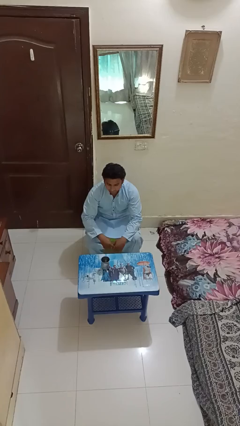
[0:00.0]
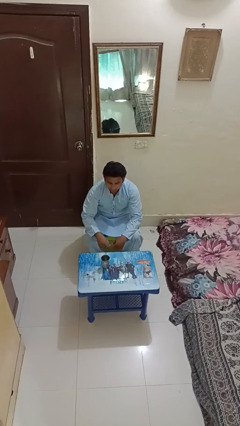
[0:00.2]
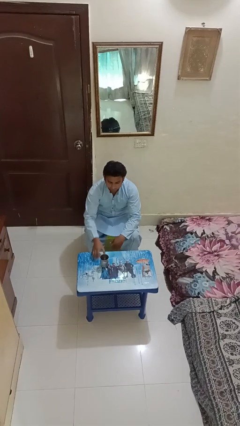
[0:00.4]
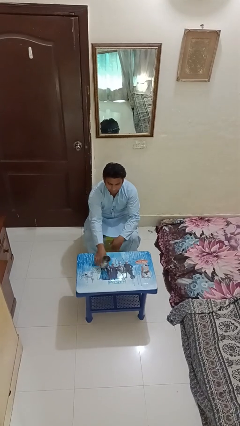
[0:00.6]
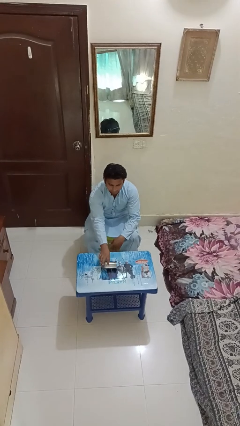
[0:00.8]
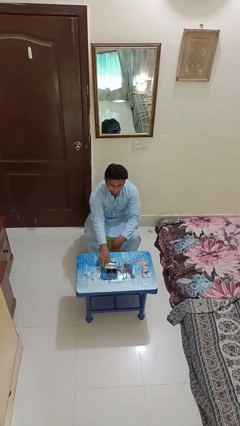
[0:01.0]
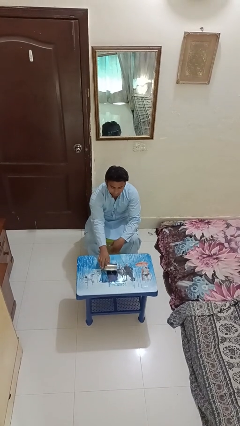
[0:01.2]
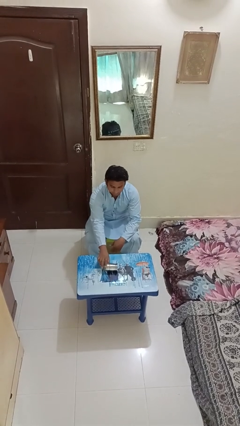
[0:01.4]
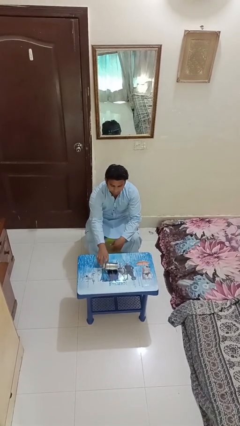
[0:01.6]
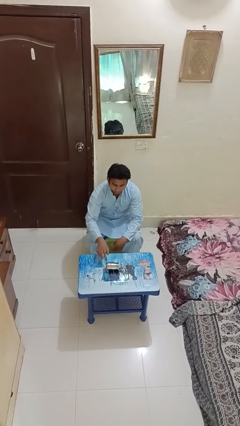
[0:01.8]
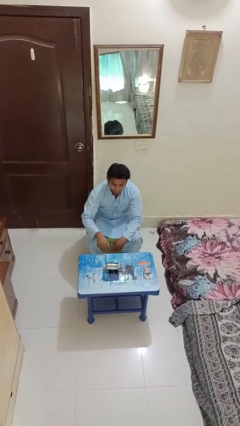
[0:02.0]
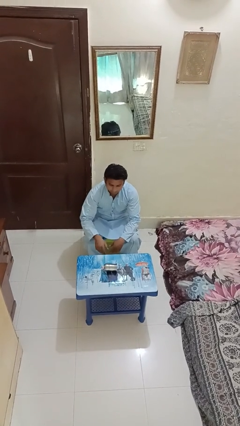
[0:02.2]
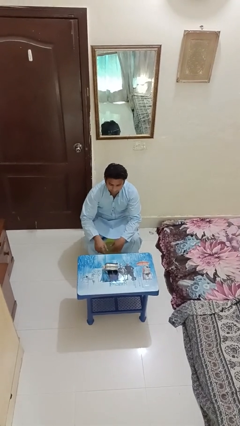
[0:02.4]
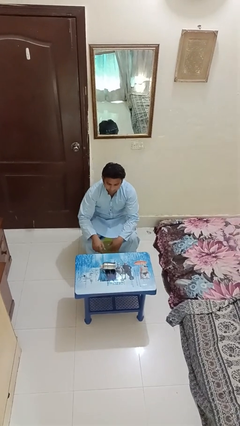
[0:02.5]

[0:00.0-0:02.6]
person knocks over glass

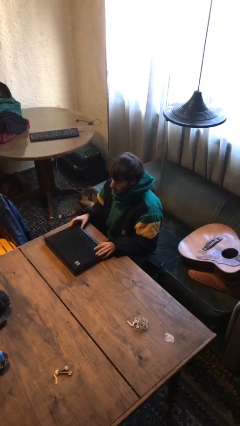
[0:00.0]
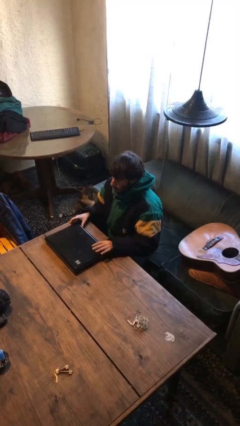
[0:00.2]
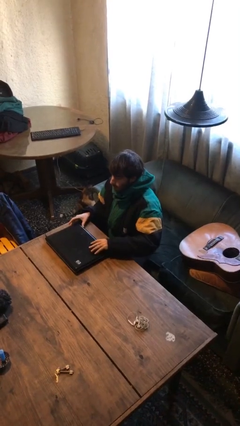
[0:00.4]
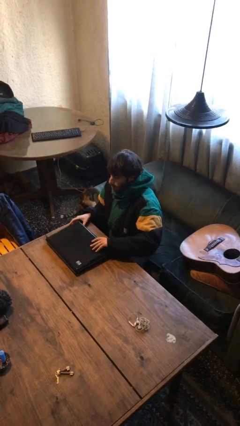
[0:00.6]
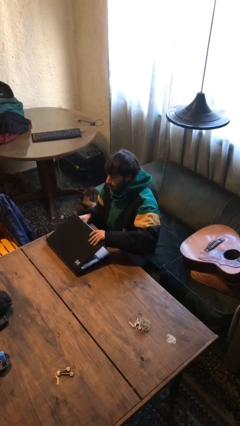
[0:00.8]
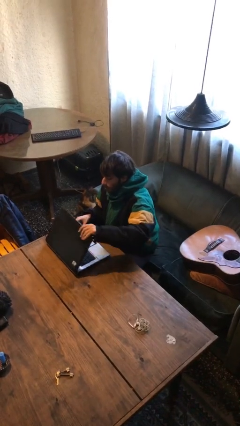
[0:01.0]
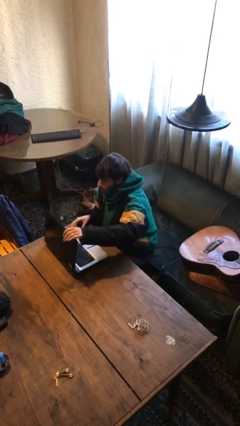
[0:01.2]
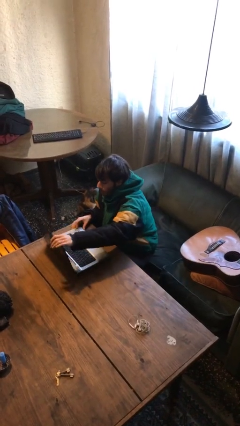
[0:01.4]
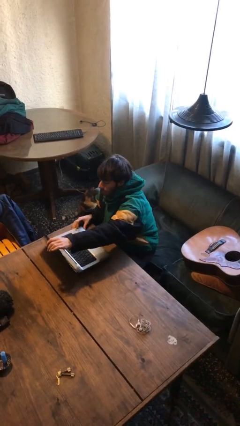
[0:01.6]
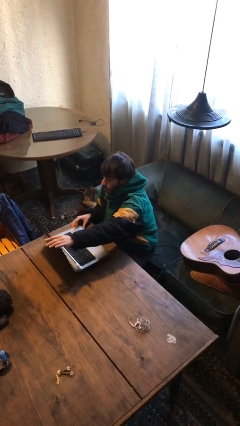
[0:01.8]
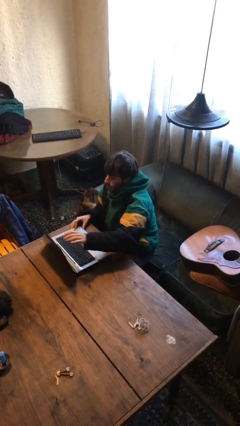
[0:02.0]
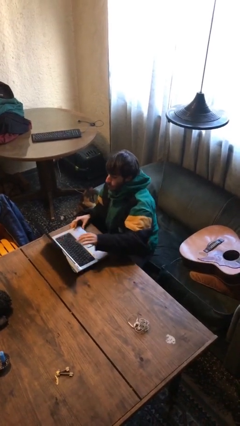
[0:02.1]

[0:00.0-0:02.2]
person opens laptop

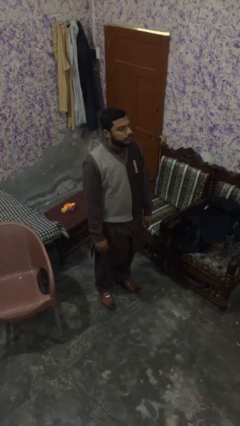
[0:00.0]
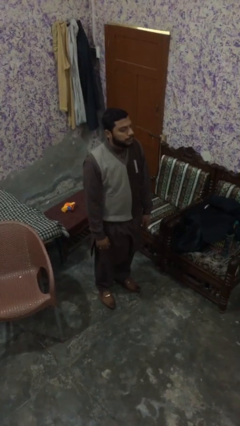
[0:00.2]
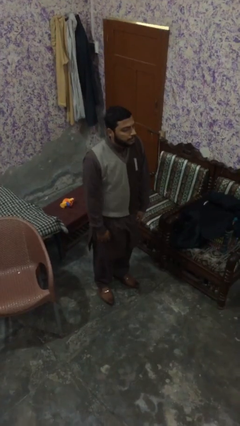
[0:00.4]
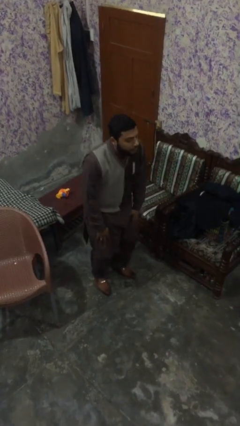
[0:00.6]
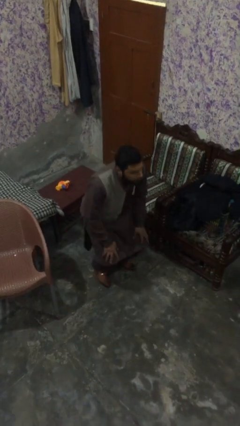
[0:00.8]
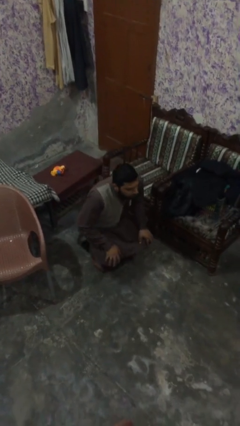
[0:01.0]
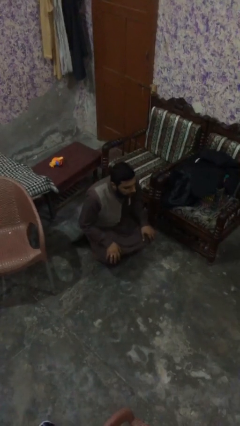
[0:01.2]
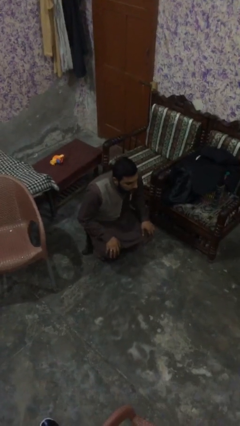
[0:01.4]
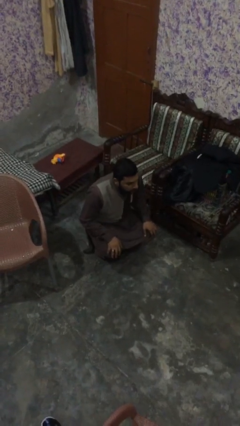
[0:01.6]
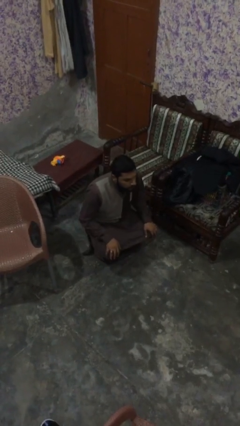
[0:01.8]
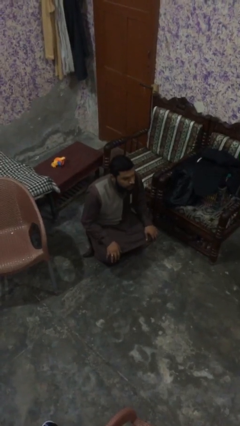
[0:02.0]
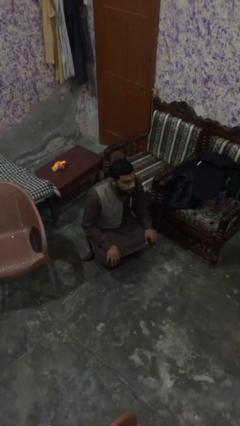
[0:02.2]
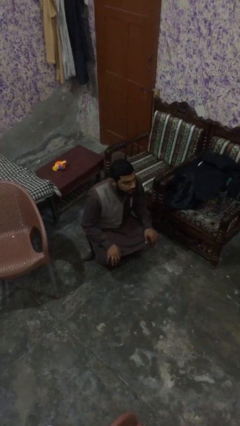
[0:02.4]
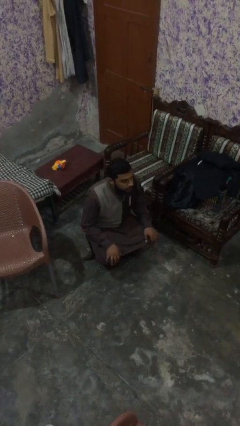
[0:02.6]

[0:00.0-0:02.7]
person sits down

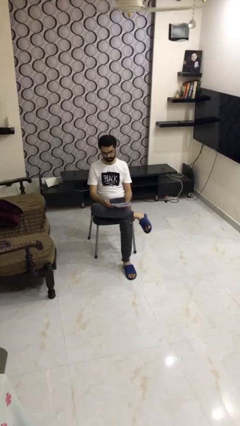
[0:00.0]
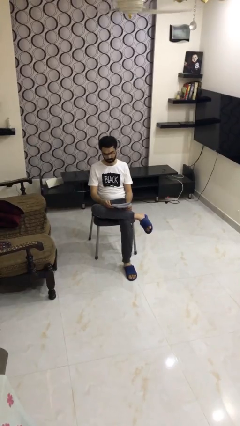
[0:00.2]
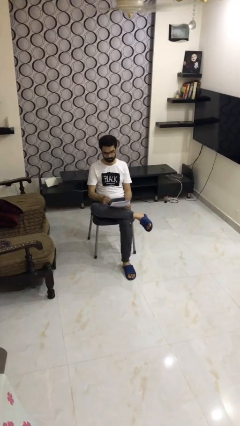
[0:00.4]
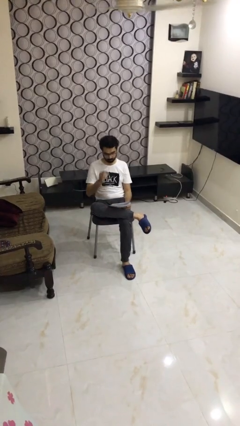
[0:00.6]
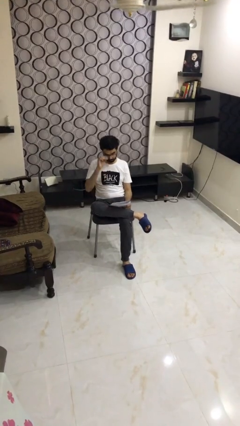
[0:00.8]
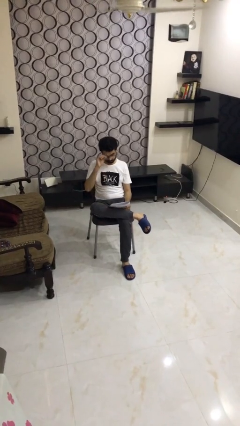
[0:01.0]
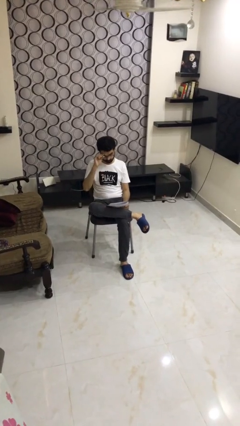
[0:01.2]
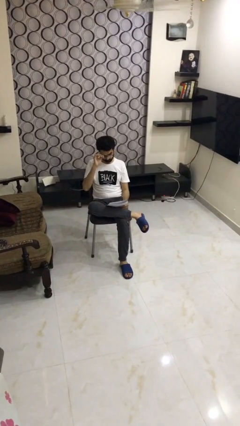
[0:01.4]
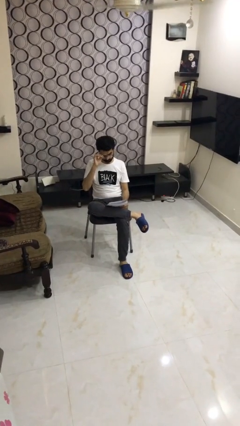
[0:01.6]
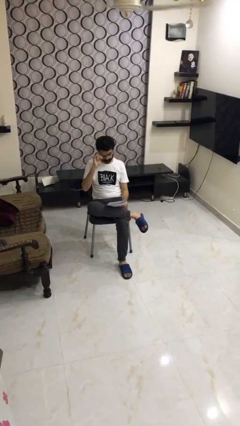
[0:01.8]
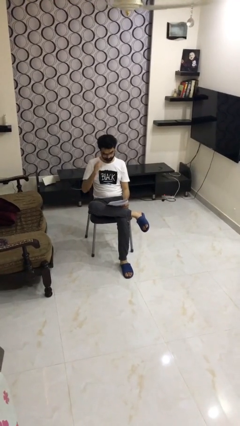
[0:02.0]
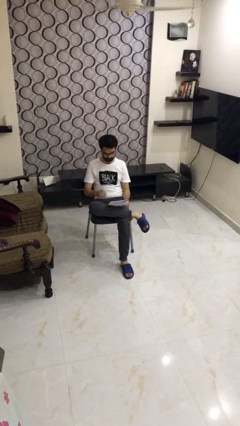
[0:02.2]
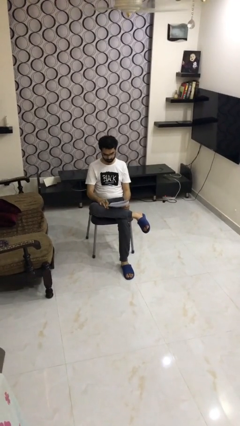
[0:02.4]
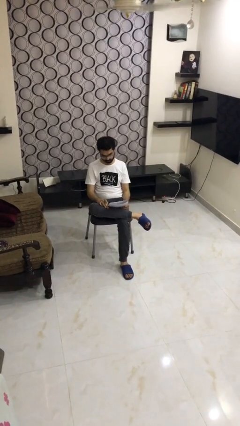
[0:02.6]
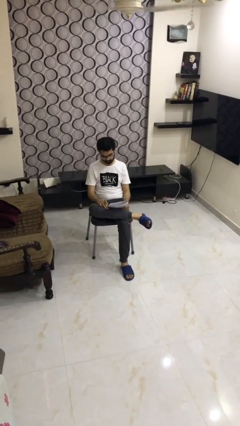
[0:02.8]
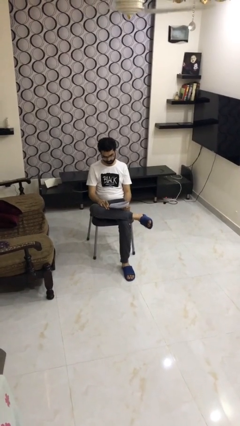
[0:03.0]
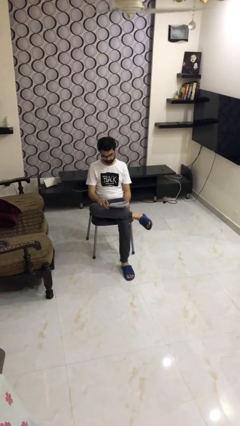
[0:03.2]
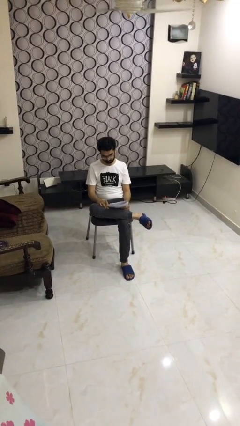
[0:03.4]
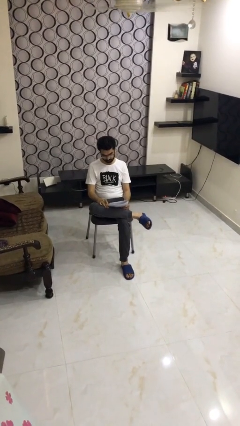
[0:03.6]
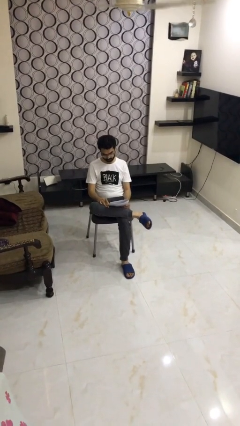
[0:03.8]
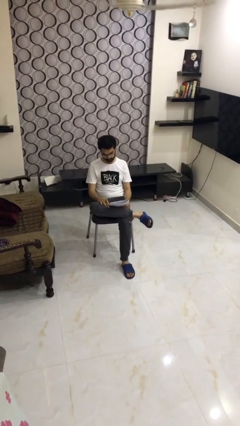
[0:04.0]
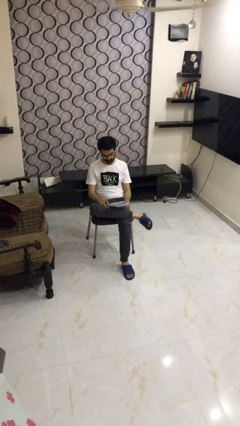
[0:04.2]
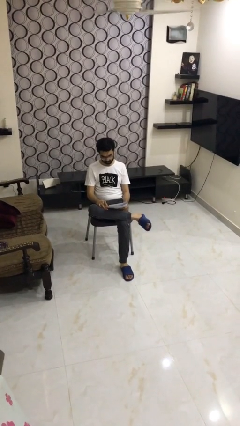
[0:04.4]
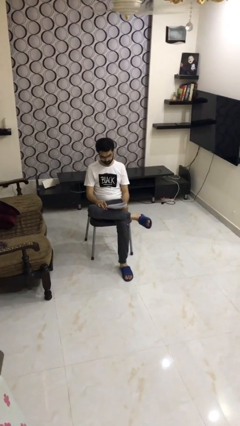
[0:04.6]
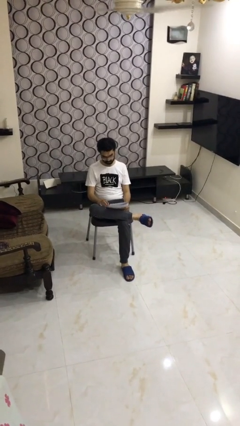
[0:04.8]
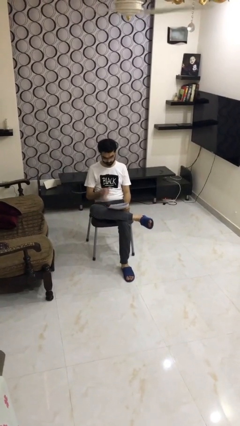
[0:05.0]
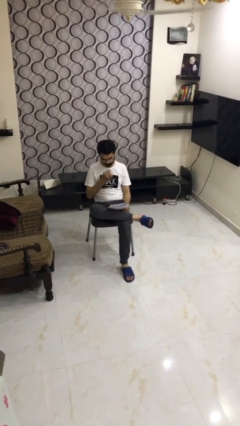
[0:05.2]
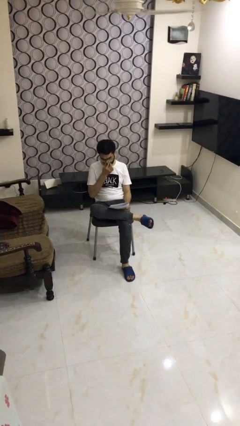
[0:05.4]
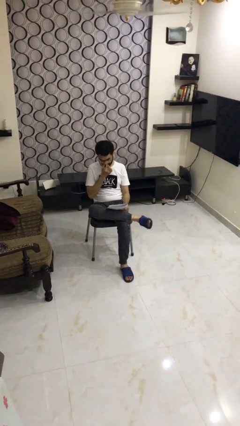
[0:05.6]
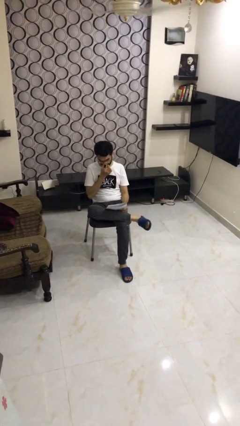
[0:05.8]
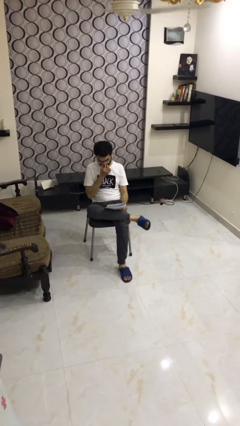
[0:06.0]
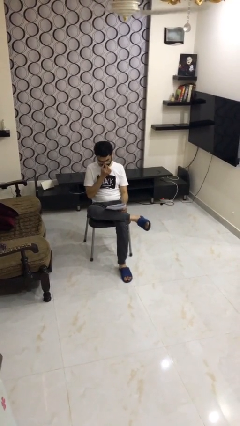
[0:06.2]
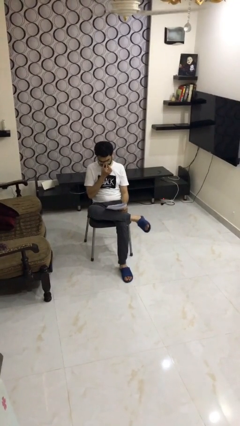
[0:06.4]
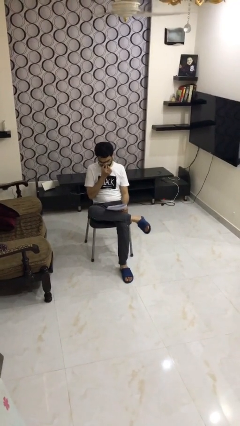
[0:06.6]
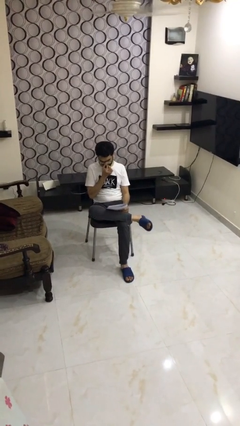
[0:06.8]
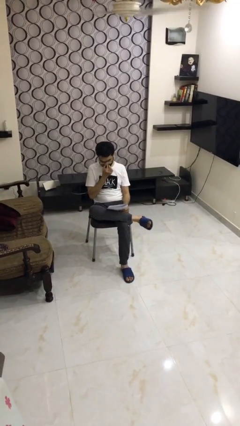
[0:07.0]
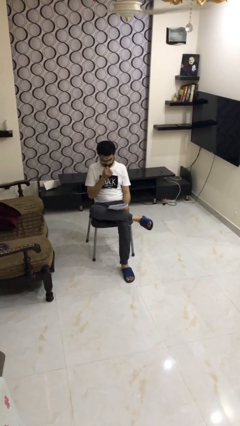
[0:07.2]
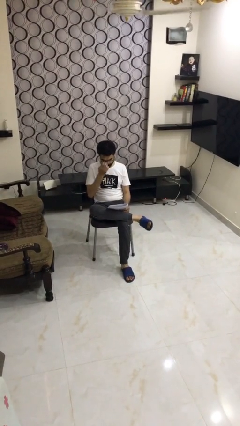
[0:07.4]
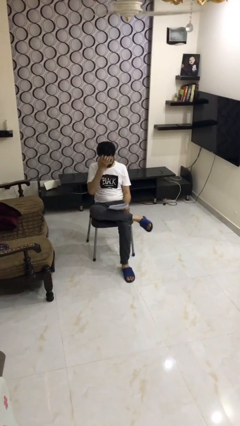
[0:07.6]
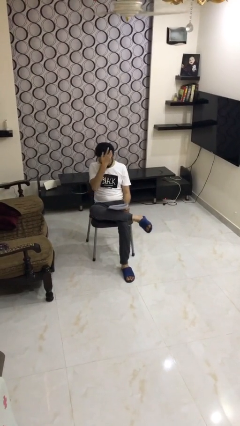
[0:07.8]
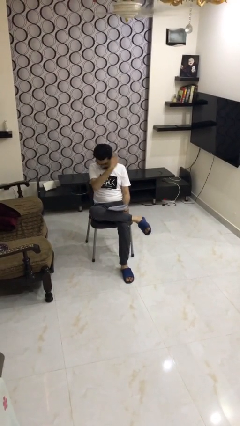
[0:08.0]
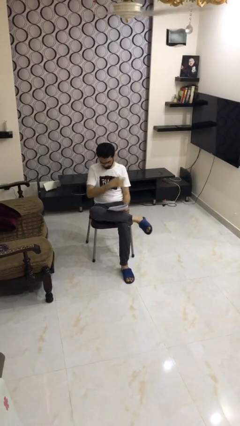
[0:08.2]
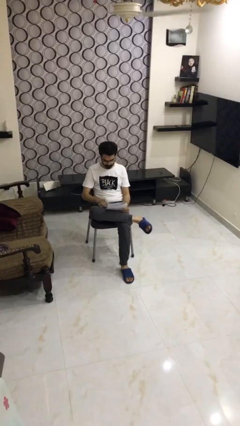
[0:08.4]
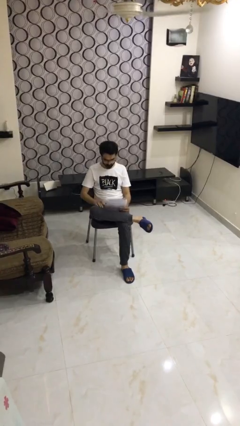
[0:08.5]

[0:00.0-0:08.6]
person reads document

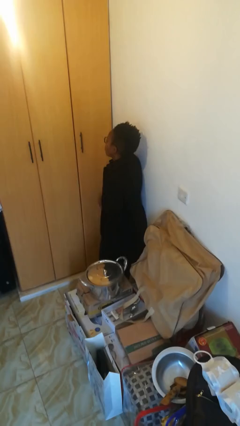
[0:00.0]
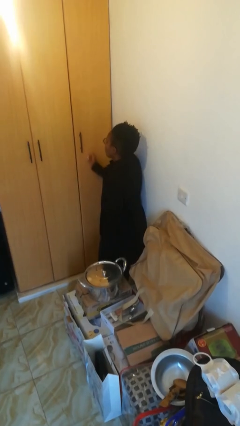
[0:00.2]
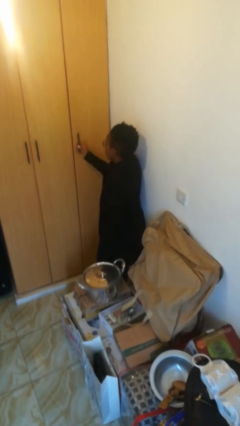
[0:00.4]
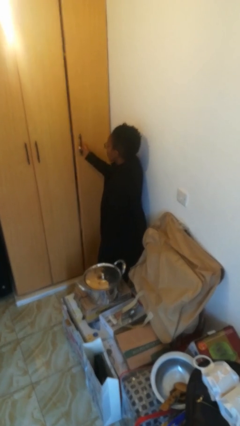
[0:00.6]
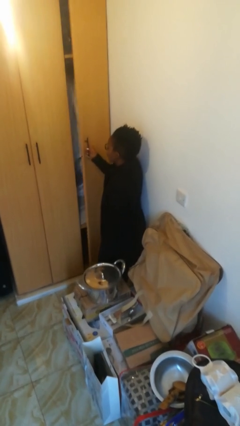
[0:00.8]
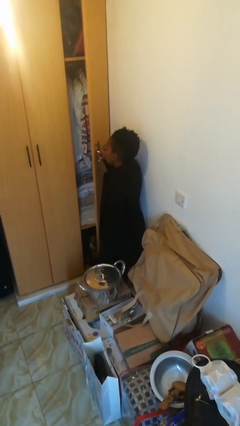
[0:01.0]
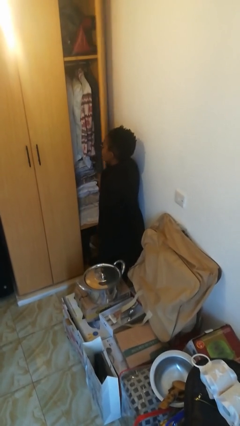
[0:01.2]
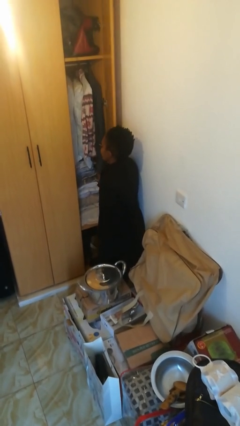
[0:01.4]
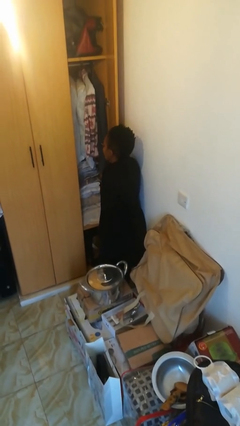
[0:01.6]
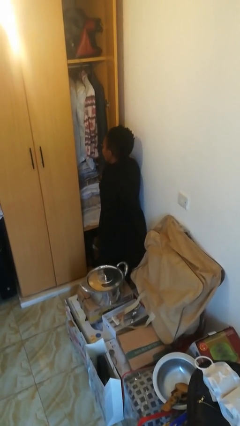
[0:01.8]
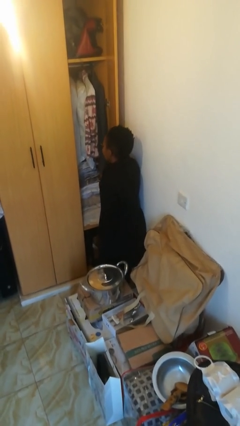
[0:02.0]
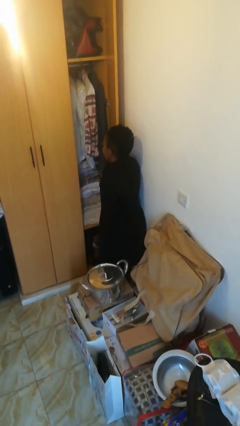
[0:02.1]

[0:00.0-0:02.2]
person opens closet door
